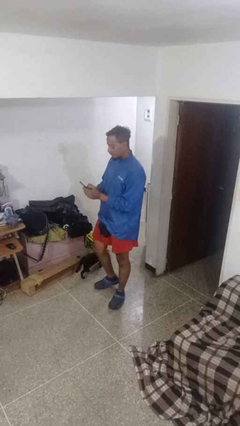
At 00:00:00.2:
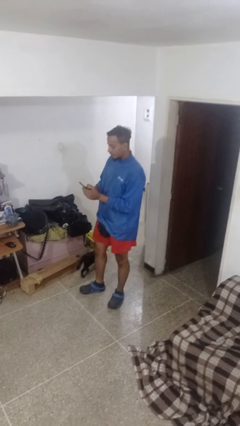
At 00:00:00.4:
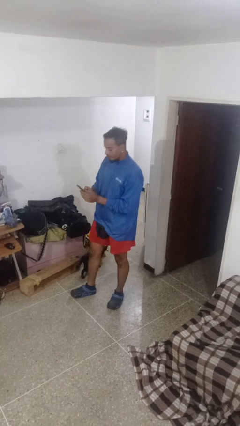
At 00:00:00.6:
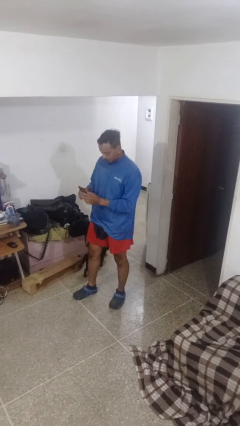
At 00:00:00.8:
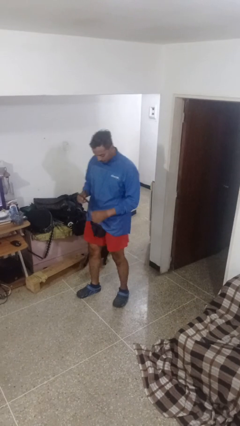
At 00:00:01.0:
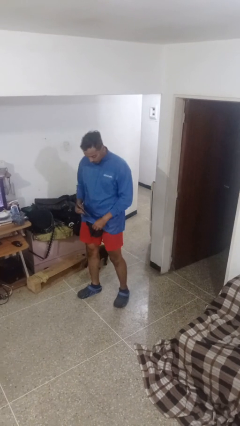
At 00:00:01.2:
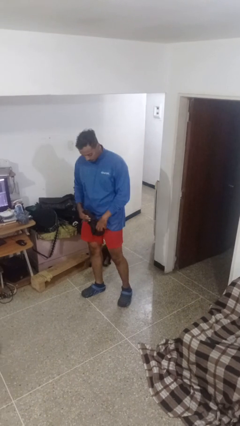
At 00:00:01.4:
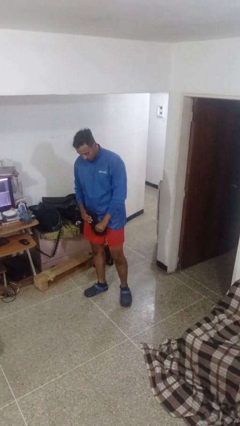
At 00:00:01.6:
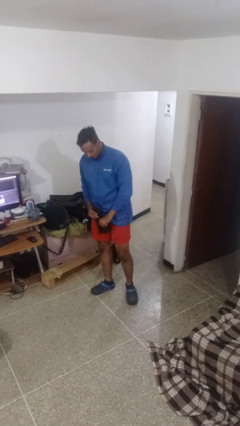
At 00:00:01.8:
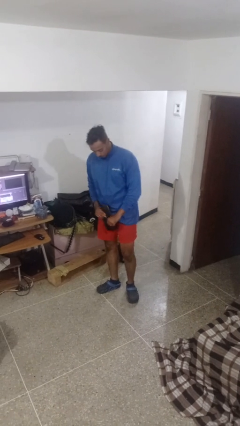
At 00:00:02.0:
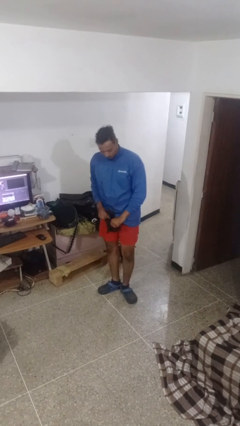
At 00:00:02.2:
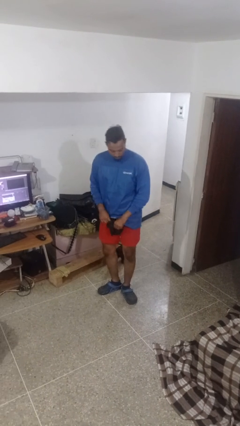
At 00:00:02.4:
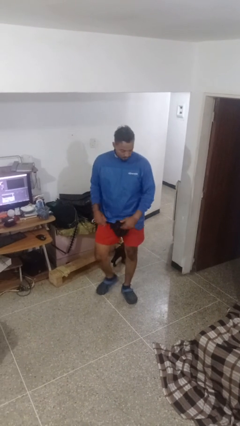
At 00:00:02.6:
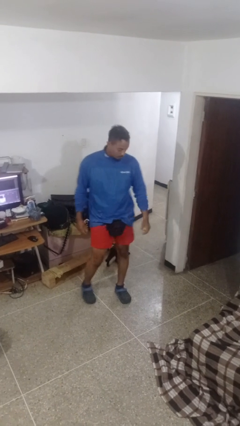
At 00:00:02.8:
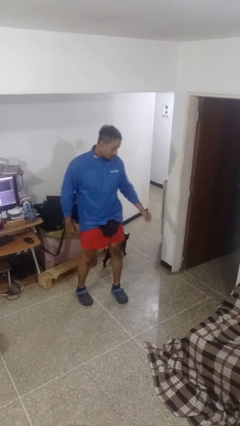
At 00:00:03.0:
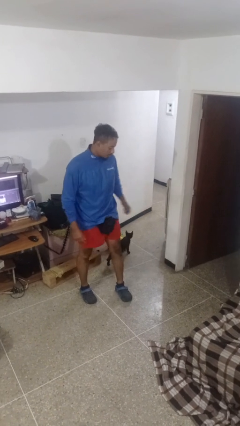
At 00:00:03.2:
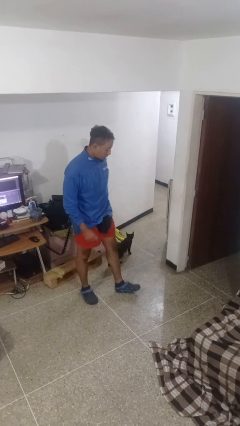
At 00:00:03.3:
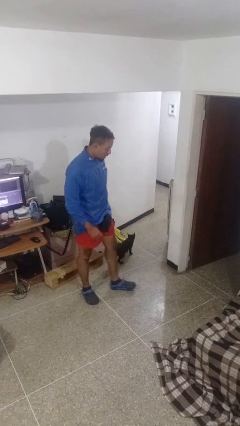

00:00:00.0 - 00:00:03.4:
person puts phone into pocket

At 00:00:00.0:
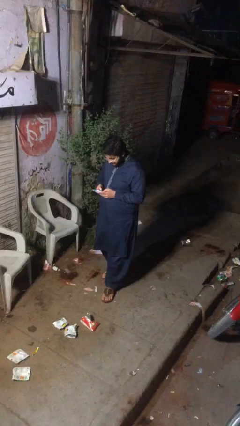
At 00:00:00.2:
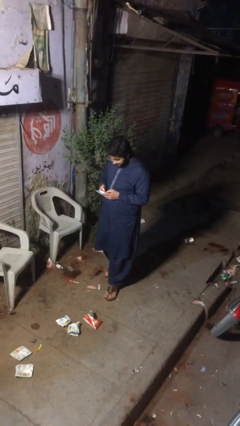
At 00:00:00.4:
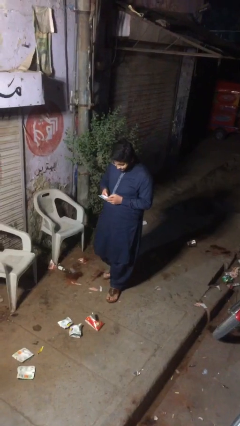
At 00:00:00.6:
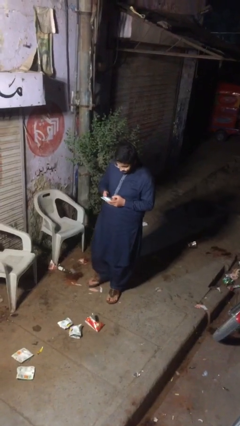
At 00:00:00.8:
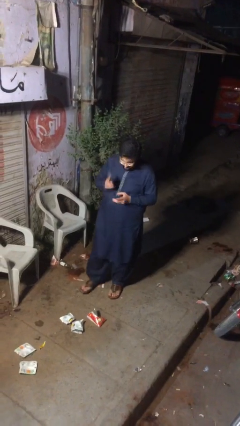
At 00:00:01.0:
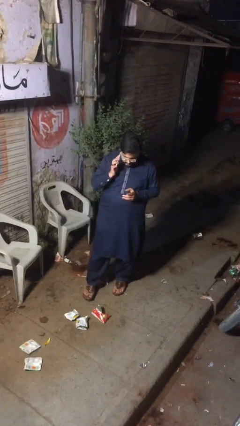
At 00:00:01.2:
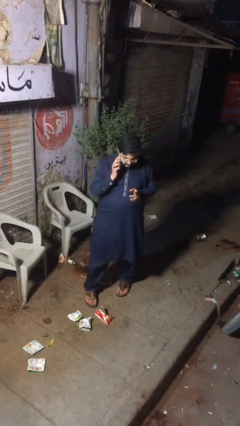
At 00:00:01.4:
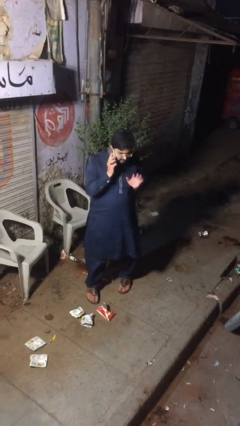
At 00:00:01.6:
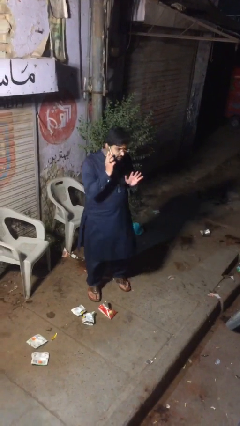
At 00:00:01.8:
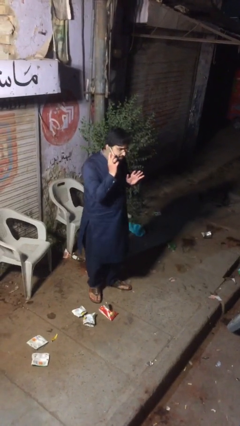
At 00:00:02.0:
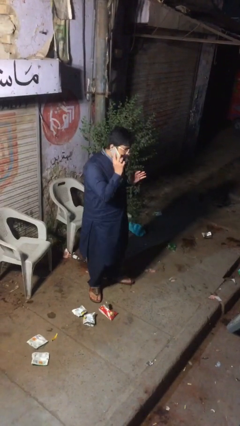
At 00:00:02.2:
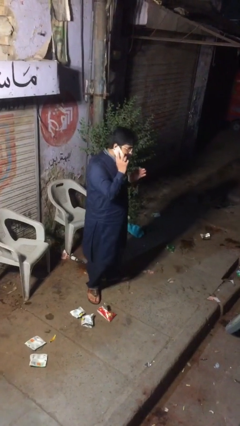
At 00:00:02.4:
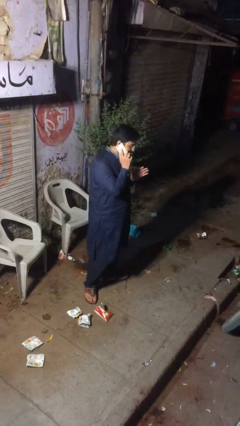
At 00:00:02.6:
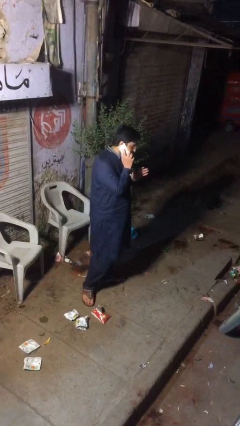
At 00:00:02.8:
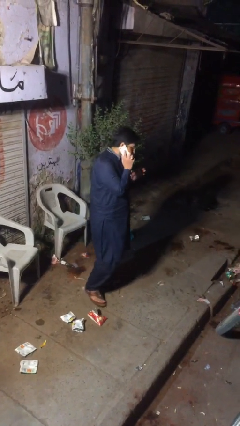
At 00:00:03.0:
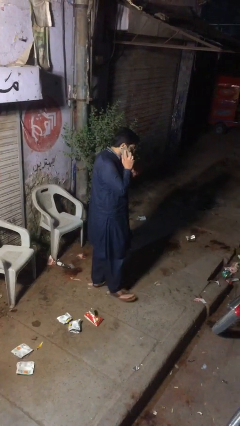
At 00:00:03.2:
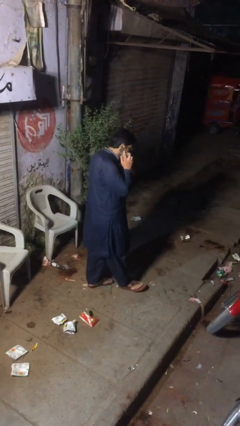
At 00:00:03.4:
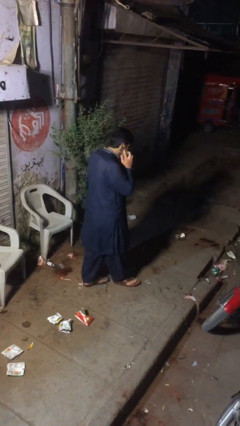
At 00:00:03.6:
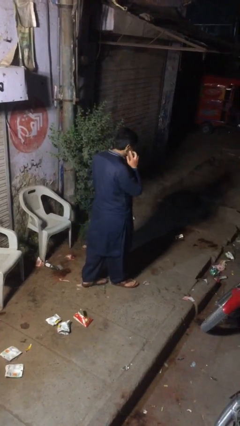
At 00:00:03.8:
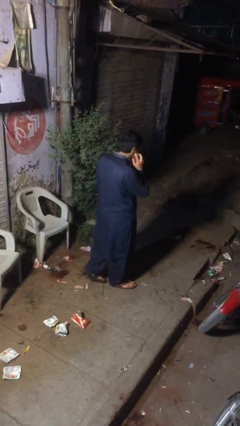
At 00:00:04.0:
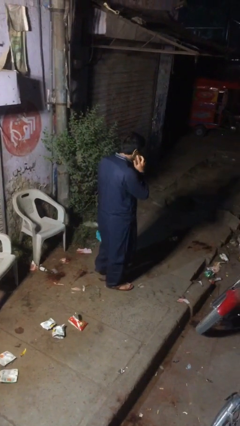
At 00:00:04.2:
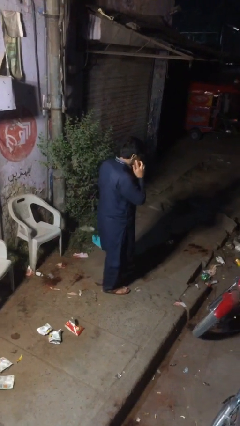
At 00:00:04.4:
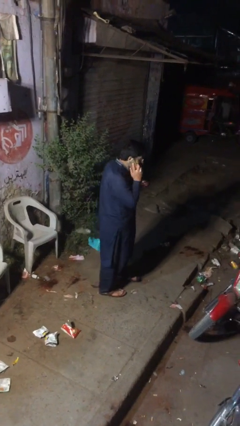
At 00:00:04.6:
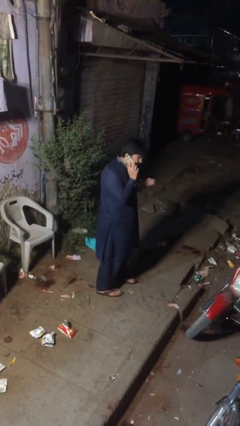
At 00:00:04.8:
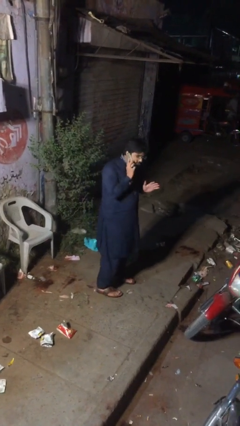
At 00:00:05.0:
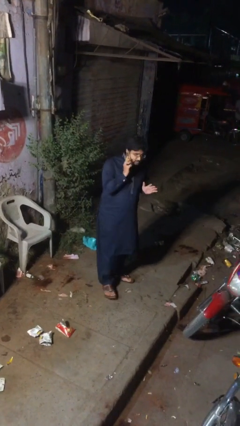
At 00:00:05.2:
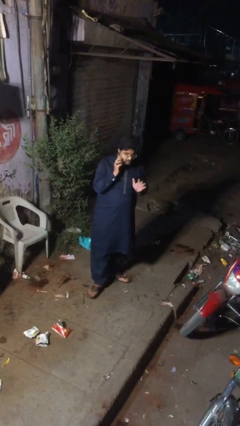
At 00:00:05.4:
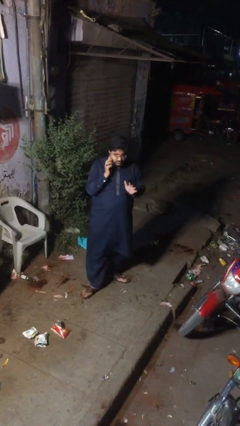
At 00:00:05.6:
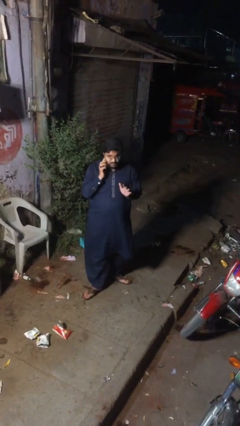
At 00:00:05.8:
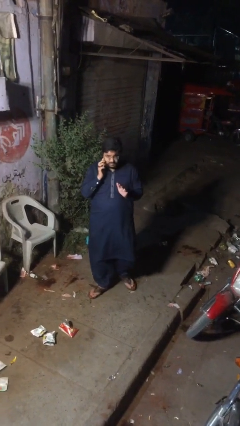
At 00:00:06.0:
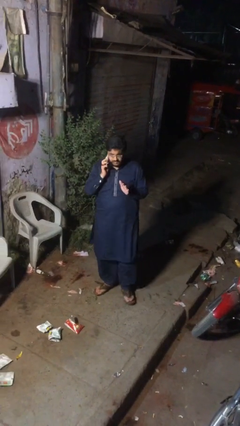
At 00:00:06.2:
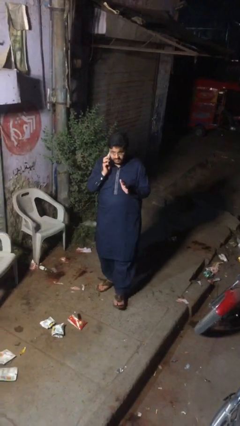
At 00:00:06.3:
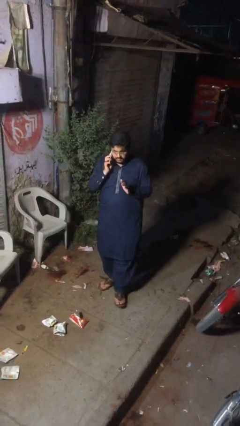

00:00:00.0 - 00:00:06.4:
person talks on phone

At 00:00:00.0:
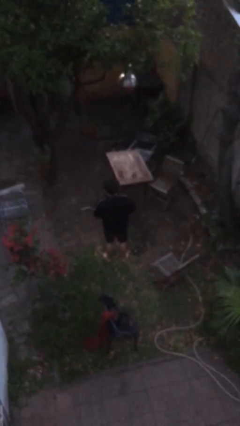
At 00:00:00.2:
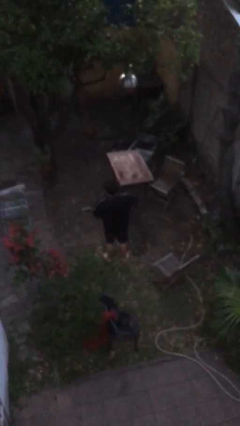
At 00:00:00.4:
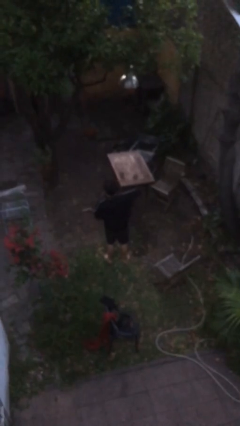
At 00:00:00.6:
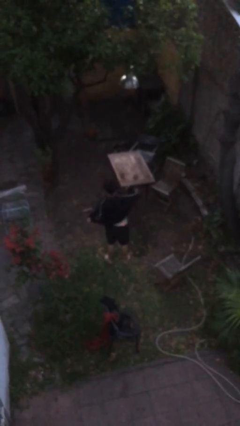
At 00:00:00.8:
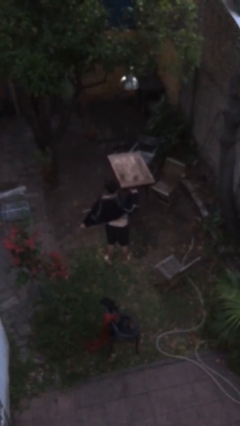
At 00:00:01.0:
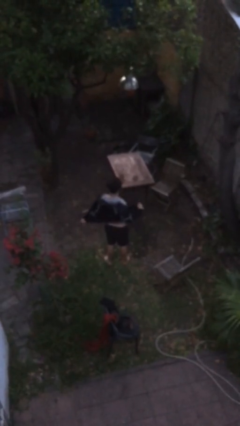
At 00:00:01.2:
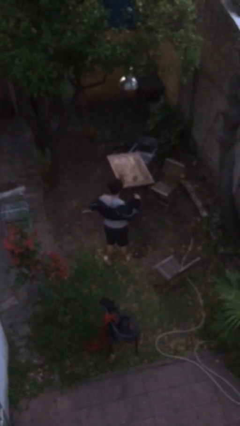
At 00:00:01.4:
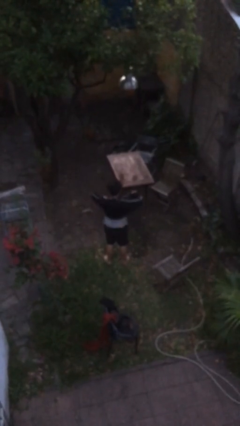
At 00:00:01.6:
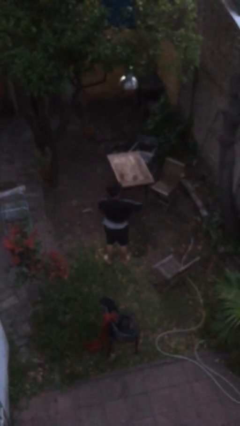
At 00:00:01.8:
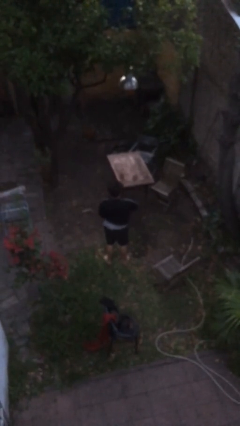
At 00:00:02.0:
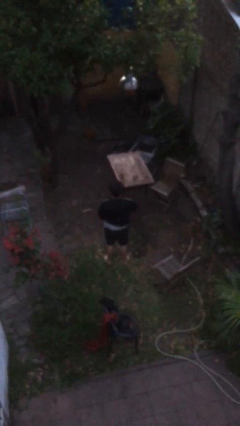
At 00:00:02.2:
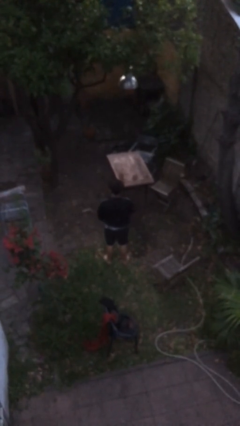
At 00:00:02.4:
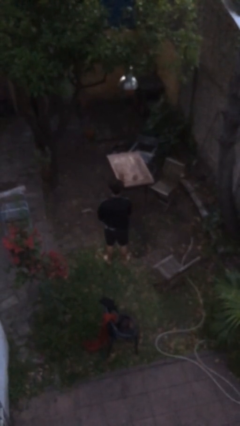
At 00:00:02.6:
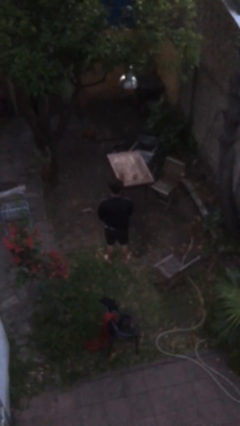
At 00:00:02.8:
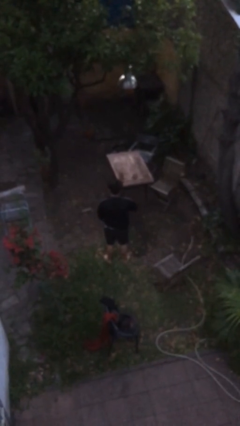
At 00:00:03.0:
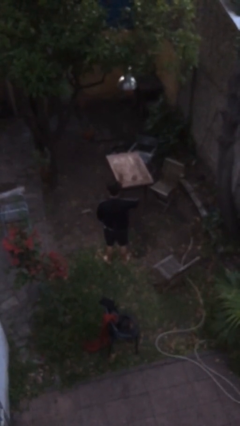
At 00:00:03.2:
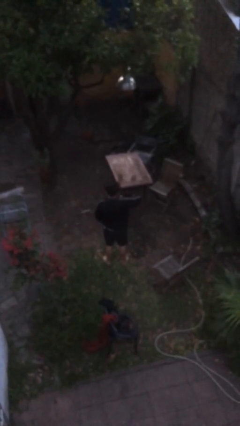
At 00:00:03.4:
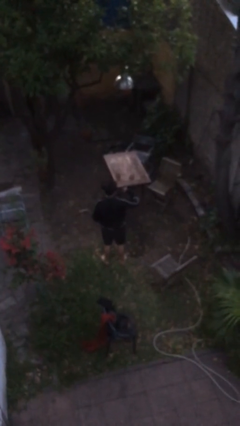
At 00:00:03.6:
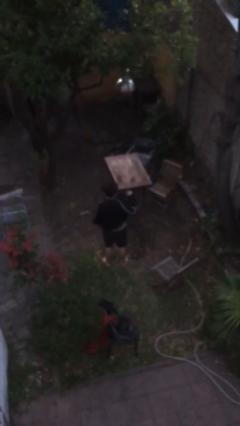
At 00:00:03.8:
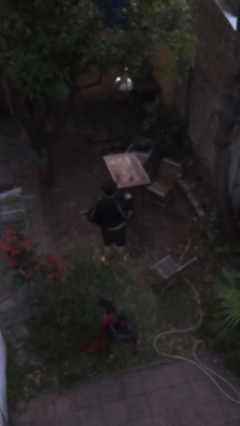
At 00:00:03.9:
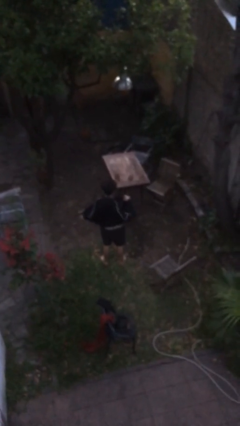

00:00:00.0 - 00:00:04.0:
person unzips jacket

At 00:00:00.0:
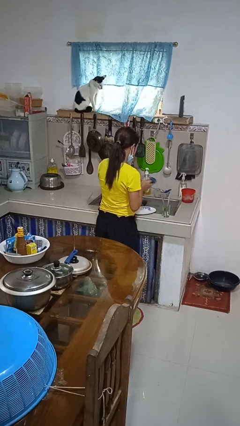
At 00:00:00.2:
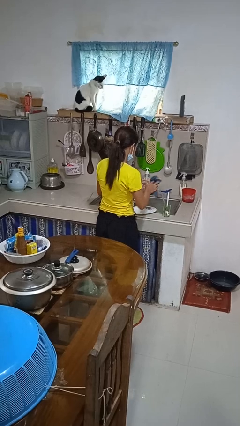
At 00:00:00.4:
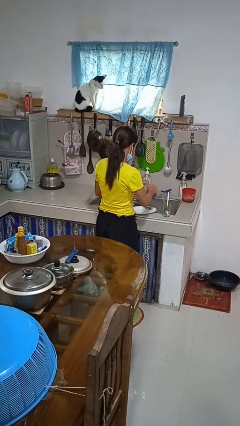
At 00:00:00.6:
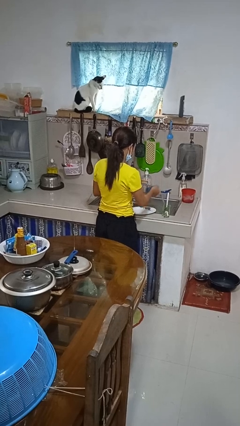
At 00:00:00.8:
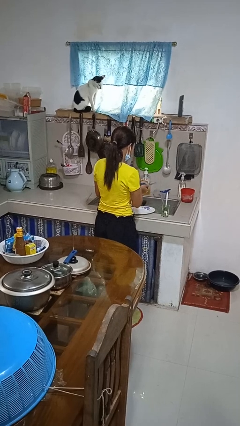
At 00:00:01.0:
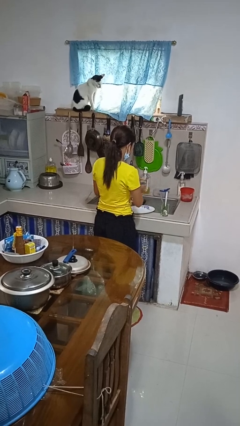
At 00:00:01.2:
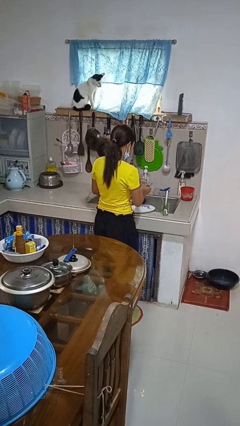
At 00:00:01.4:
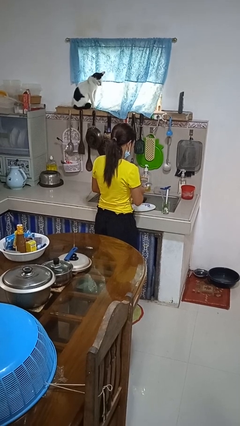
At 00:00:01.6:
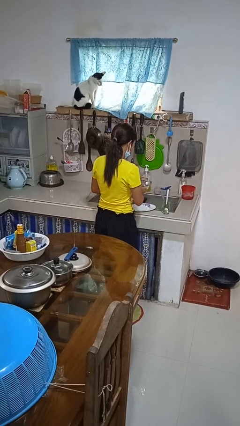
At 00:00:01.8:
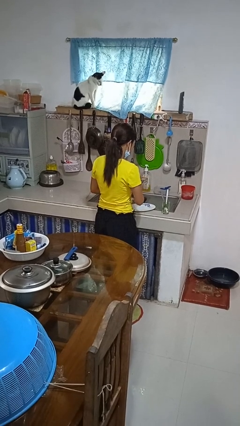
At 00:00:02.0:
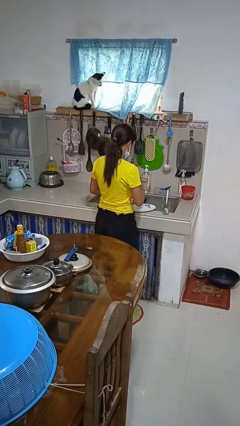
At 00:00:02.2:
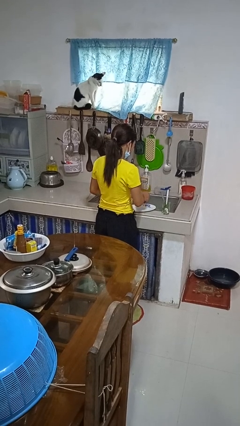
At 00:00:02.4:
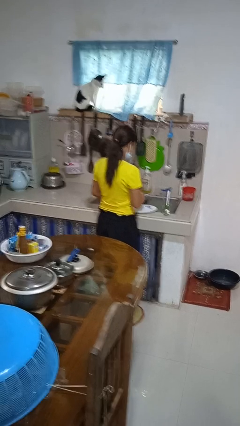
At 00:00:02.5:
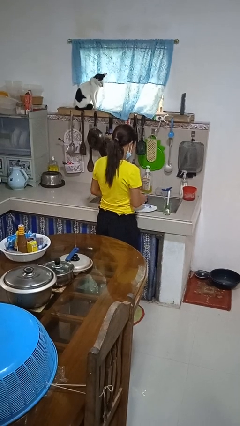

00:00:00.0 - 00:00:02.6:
person dries dish

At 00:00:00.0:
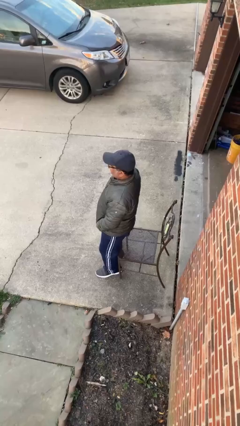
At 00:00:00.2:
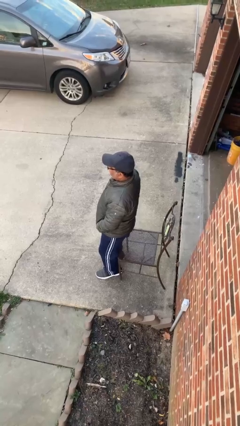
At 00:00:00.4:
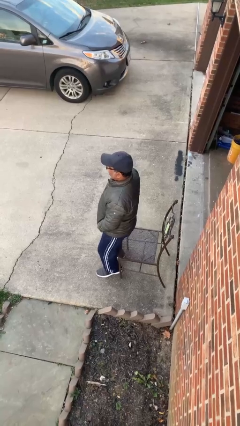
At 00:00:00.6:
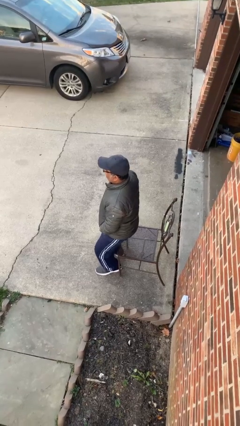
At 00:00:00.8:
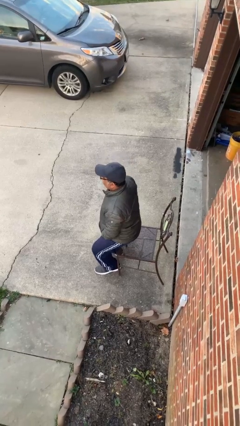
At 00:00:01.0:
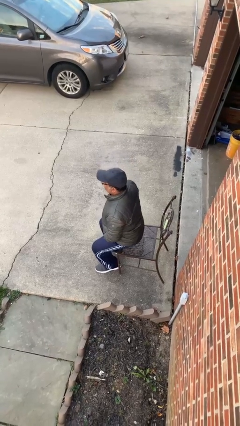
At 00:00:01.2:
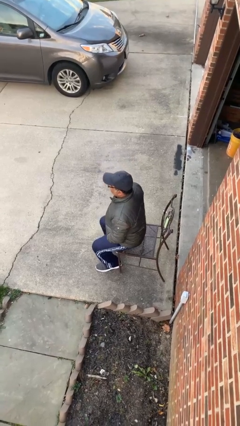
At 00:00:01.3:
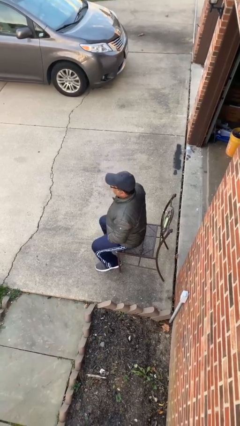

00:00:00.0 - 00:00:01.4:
person sits down
